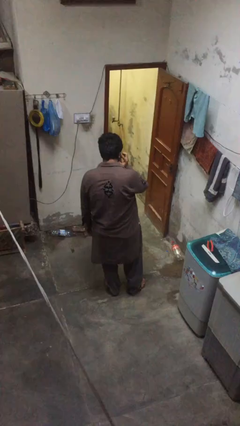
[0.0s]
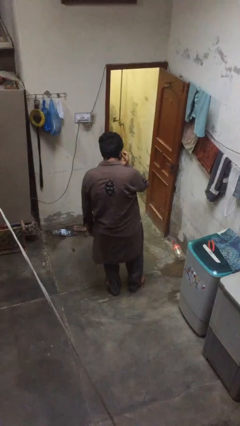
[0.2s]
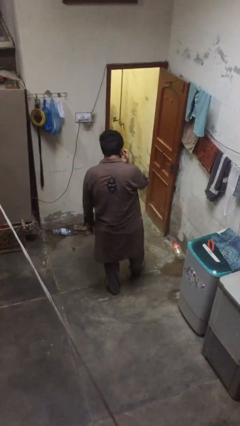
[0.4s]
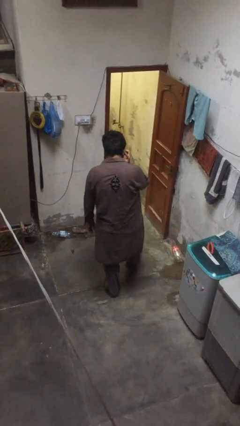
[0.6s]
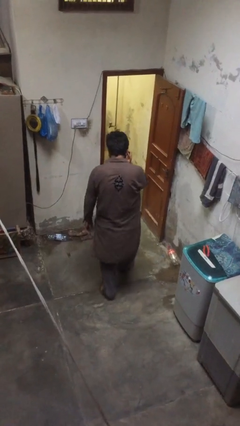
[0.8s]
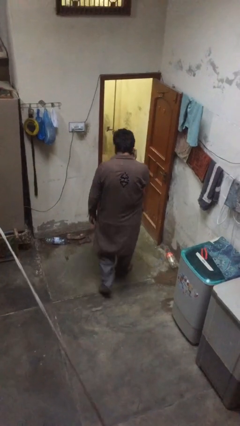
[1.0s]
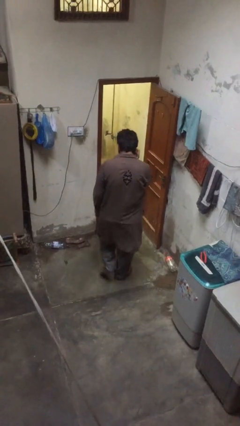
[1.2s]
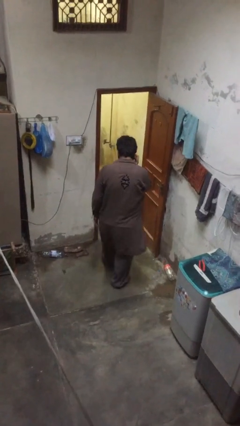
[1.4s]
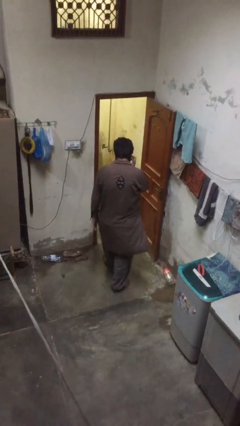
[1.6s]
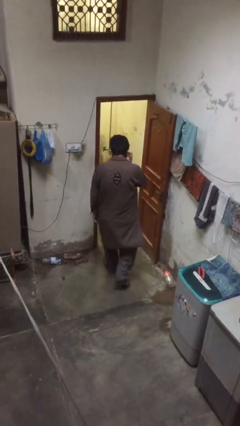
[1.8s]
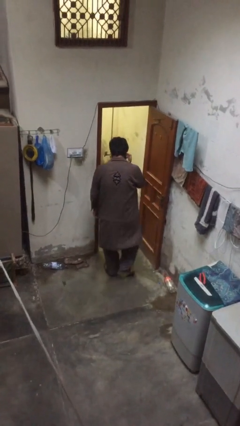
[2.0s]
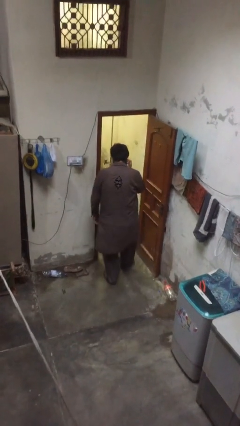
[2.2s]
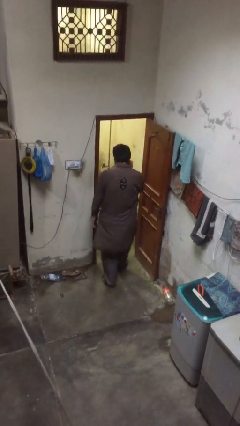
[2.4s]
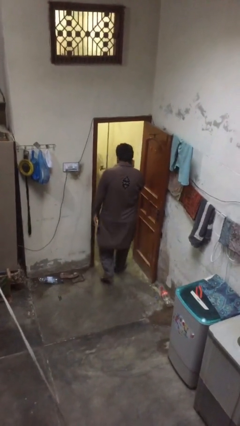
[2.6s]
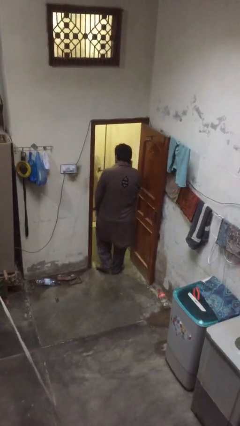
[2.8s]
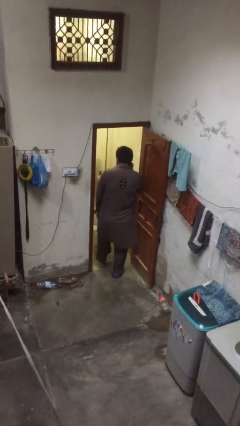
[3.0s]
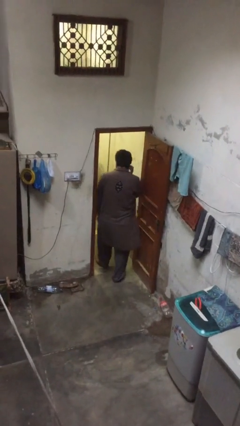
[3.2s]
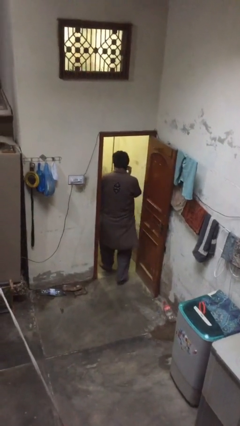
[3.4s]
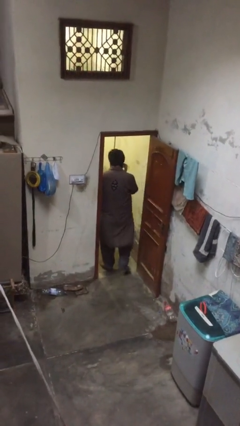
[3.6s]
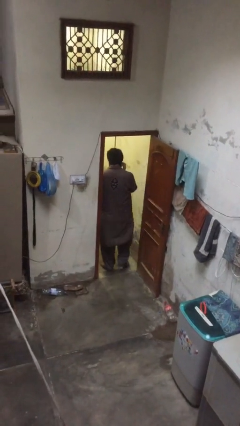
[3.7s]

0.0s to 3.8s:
person exits scene through structure

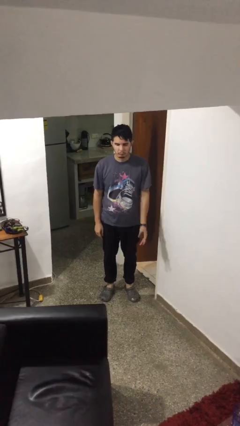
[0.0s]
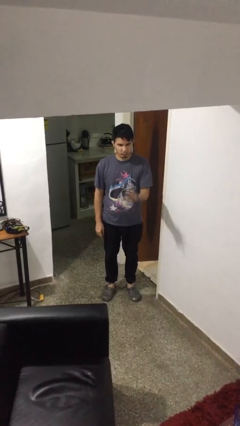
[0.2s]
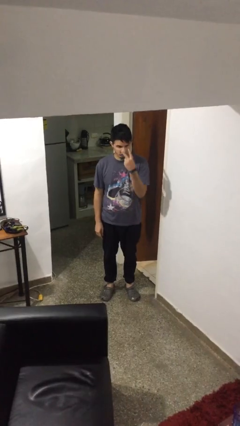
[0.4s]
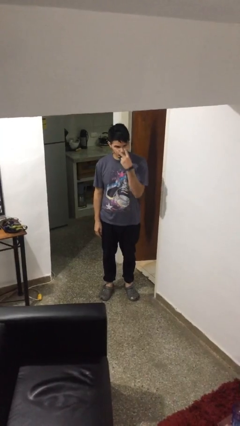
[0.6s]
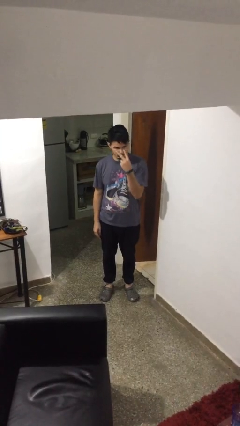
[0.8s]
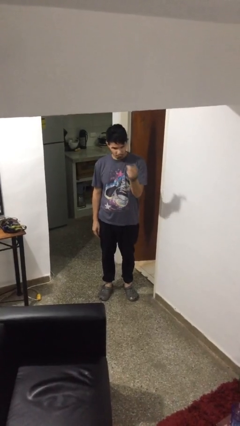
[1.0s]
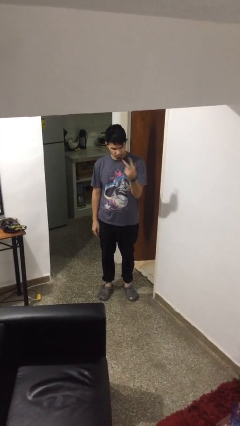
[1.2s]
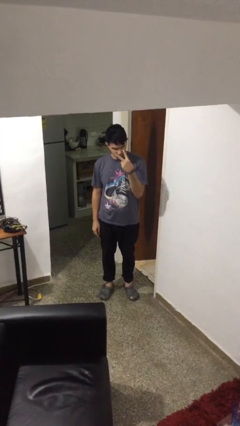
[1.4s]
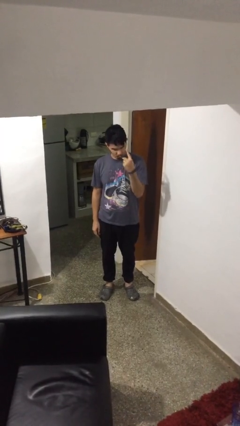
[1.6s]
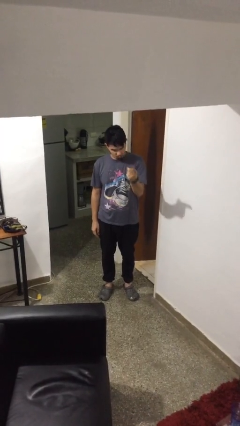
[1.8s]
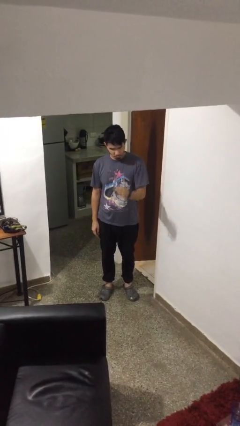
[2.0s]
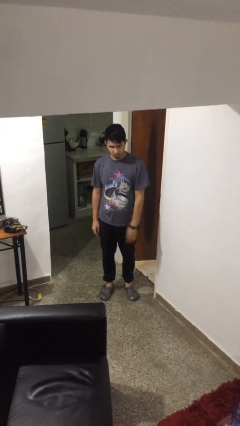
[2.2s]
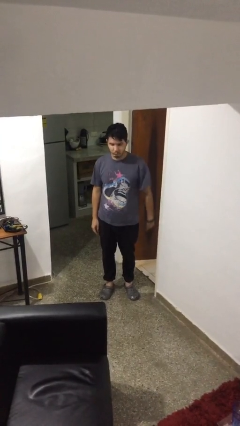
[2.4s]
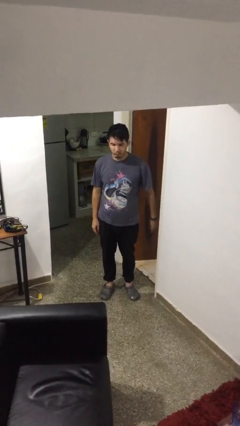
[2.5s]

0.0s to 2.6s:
person gestures watch closely

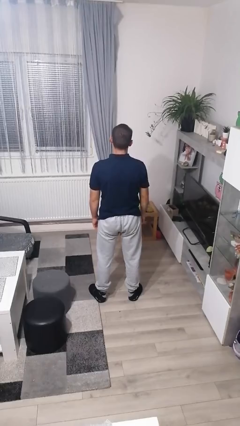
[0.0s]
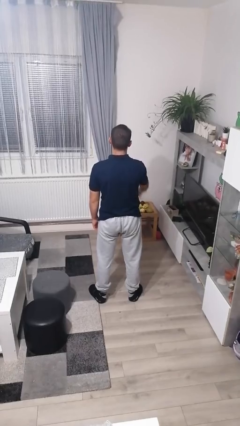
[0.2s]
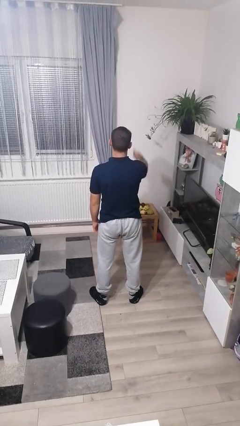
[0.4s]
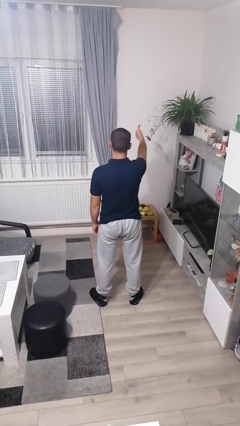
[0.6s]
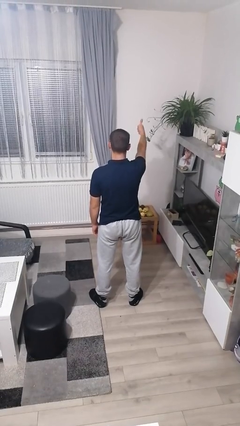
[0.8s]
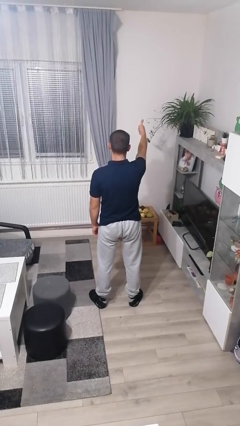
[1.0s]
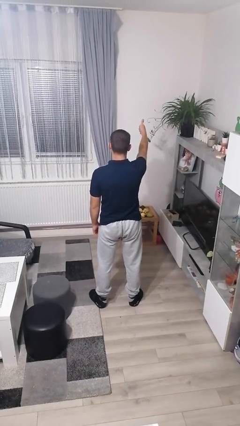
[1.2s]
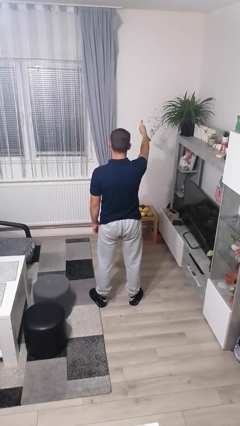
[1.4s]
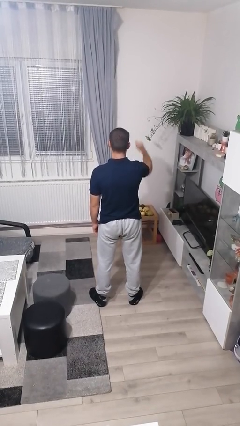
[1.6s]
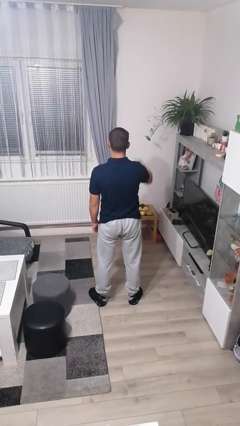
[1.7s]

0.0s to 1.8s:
person gestures number one

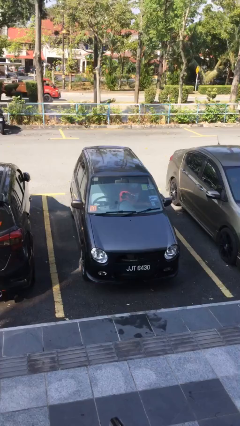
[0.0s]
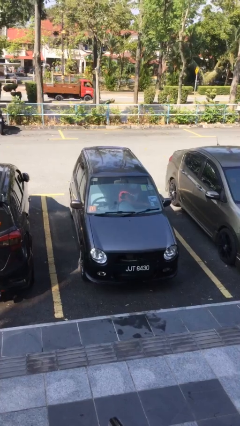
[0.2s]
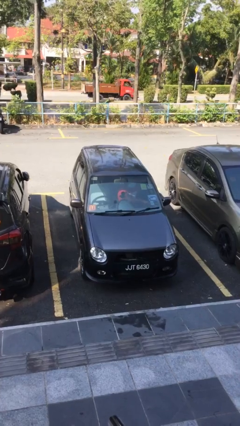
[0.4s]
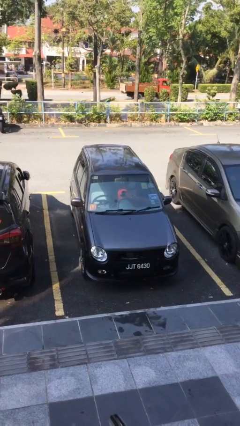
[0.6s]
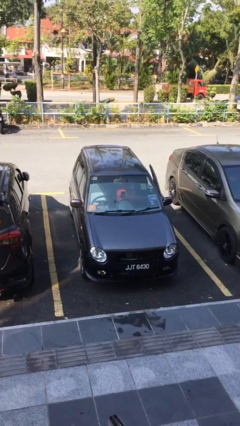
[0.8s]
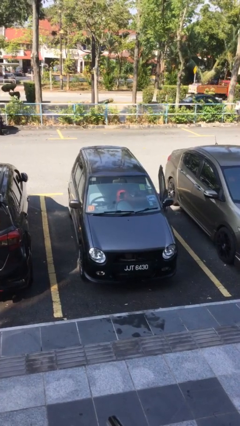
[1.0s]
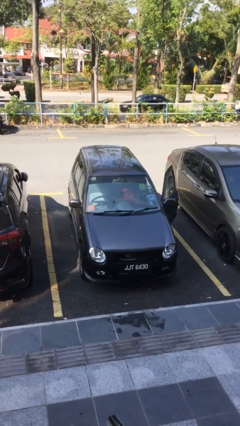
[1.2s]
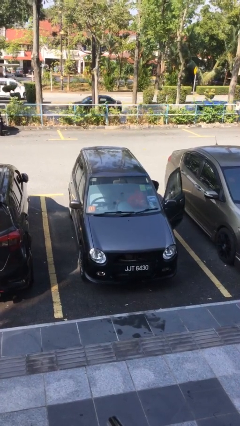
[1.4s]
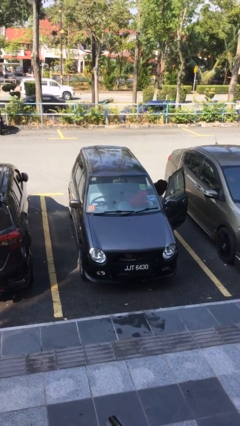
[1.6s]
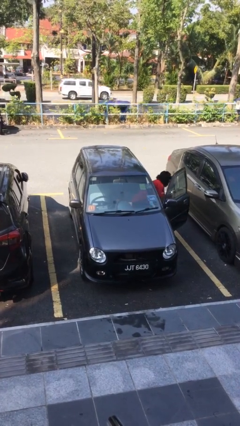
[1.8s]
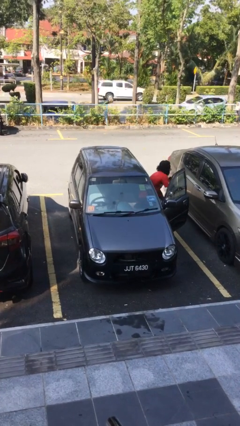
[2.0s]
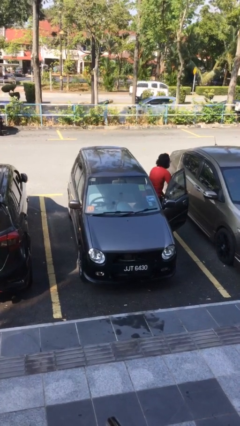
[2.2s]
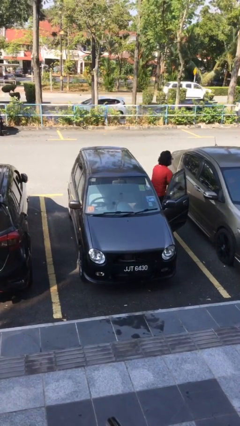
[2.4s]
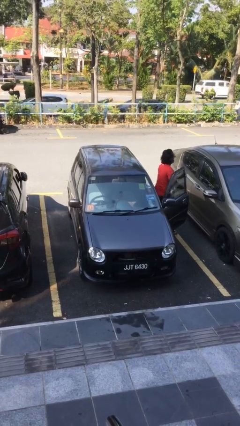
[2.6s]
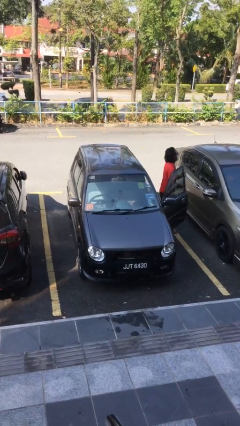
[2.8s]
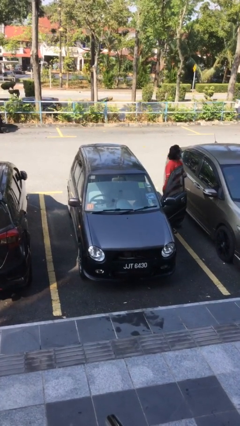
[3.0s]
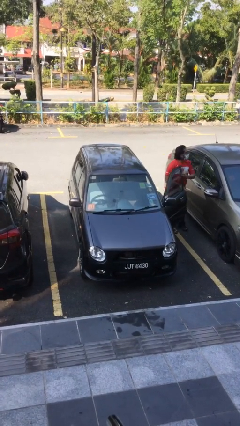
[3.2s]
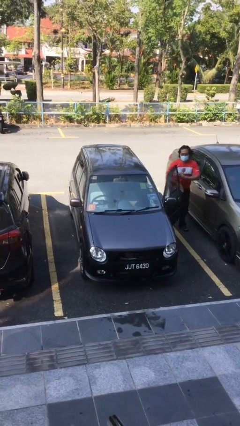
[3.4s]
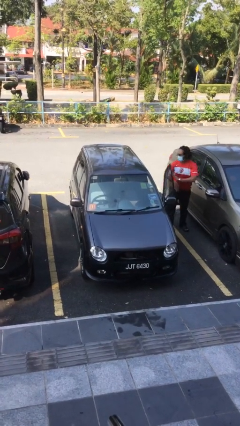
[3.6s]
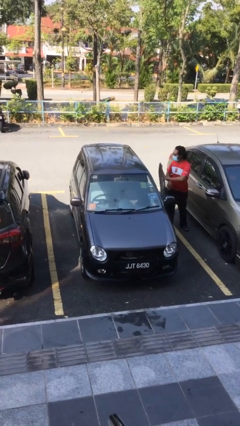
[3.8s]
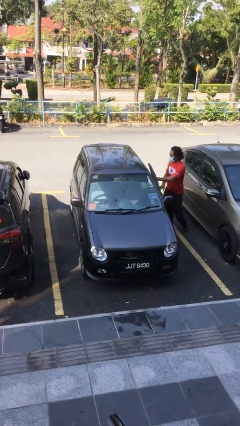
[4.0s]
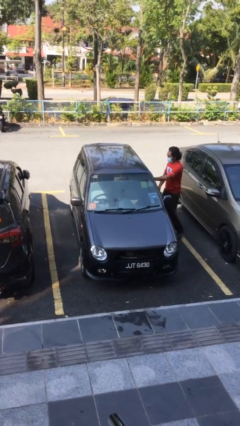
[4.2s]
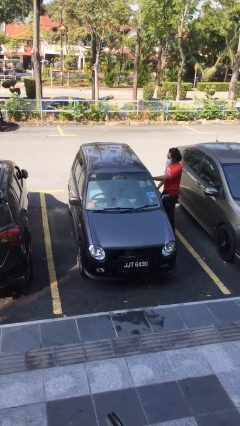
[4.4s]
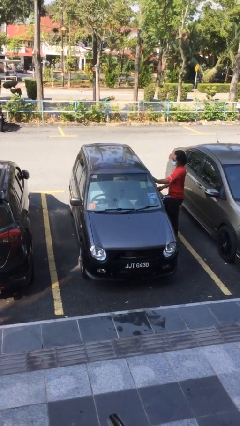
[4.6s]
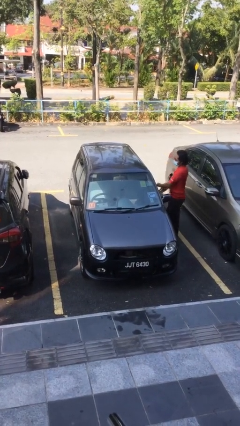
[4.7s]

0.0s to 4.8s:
car drops off person

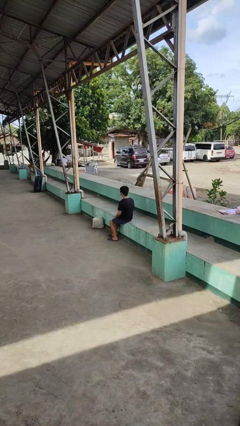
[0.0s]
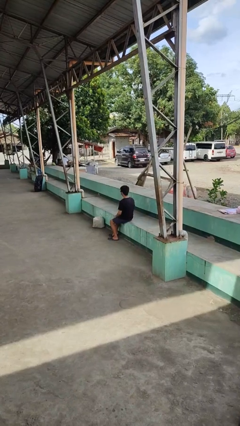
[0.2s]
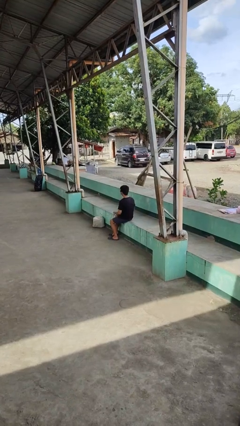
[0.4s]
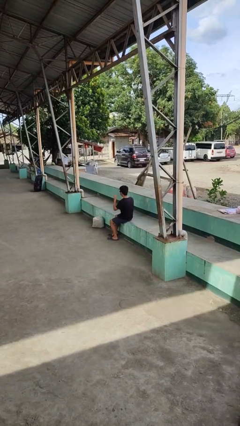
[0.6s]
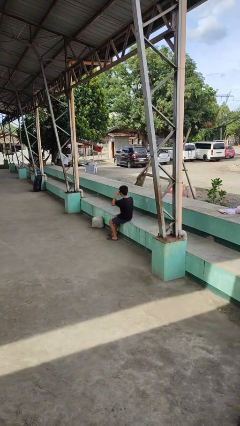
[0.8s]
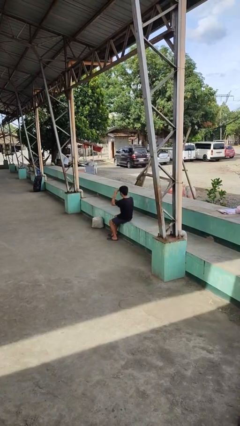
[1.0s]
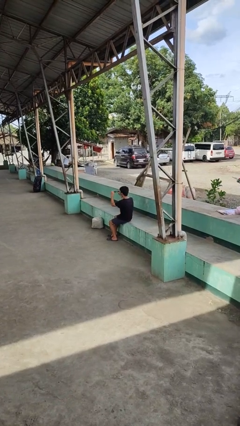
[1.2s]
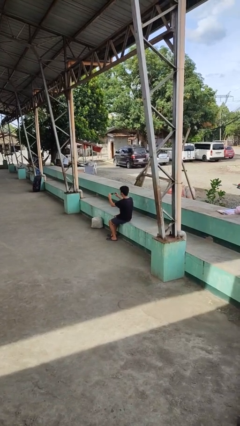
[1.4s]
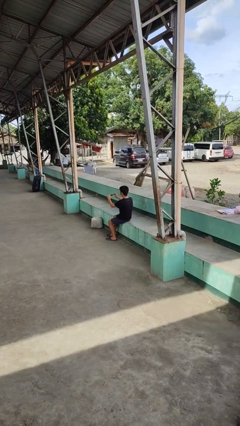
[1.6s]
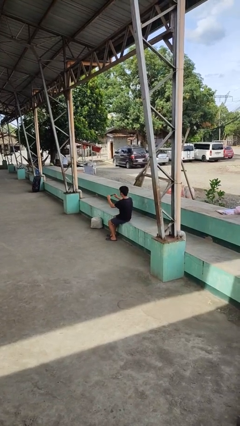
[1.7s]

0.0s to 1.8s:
person takes off sunglasses

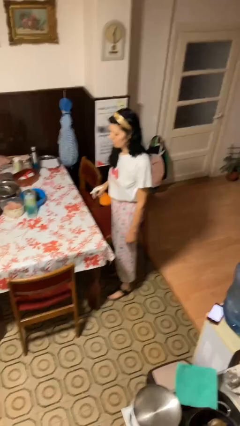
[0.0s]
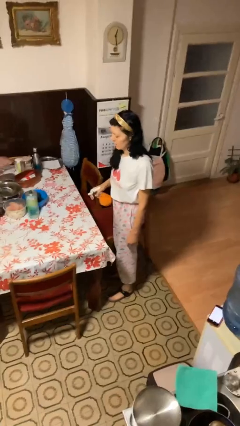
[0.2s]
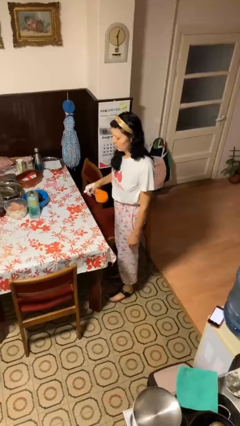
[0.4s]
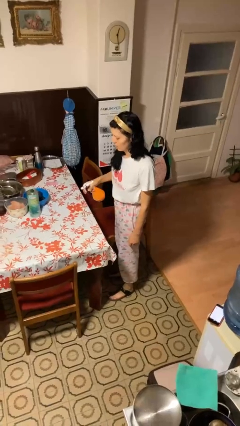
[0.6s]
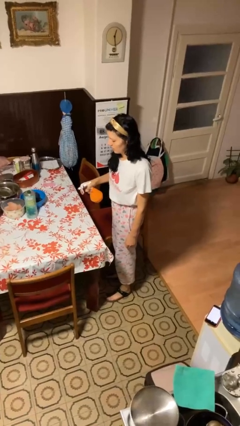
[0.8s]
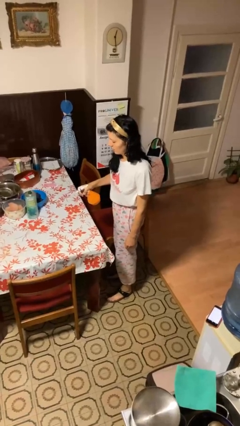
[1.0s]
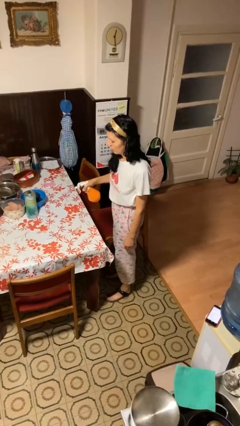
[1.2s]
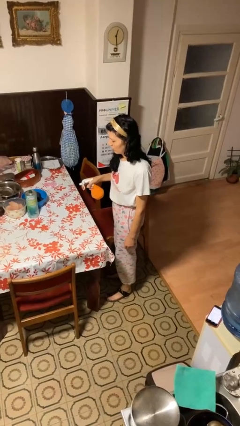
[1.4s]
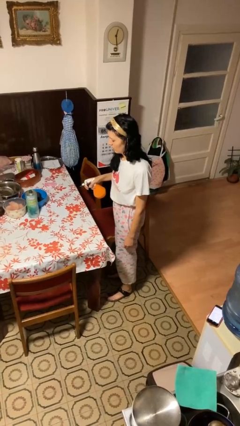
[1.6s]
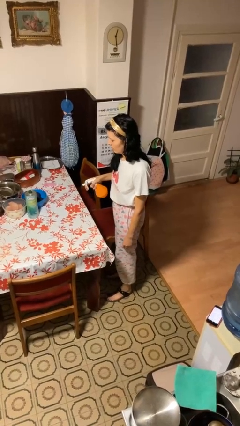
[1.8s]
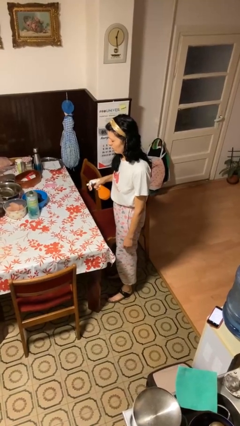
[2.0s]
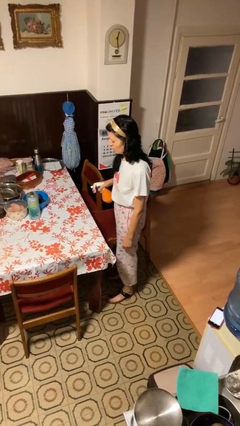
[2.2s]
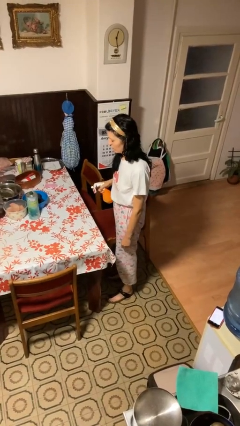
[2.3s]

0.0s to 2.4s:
person sprays from bottle
